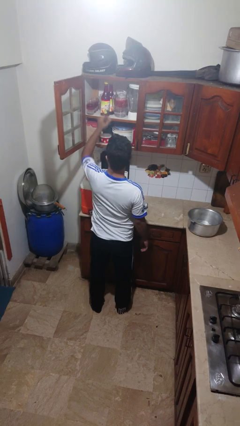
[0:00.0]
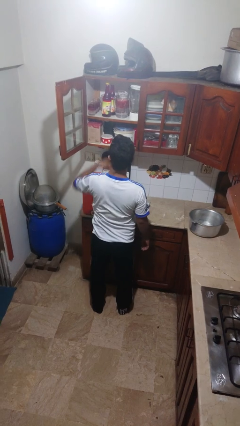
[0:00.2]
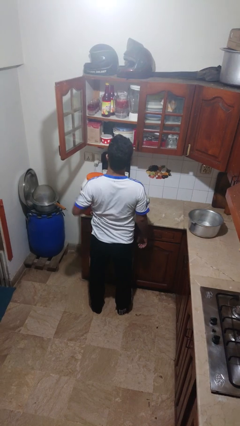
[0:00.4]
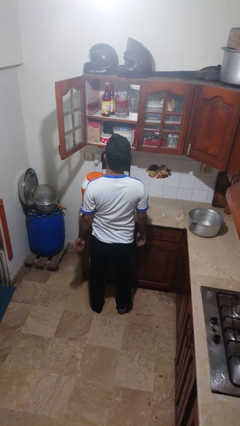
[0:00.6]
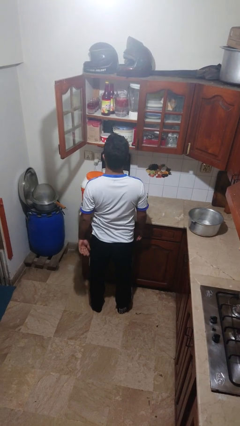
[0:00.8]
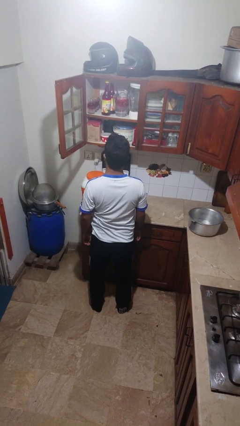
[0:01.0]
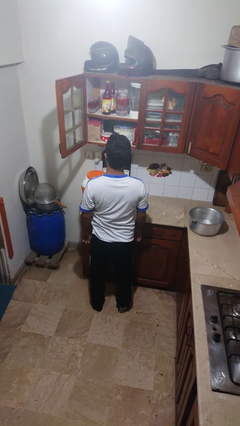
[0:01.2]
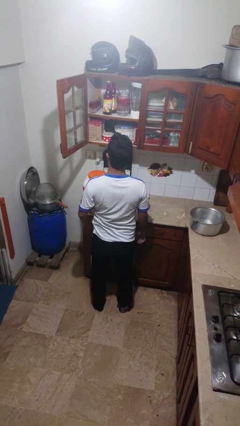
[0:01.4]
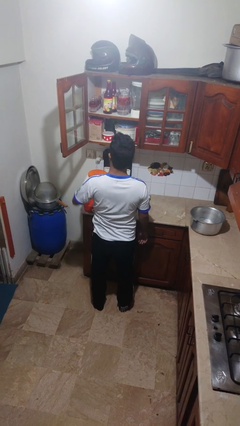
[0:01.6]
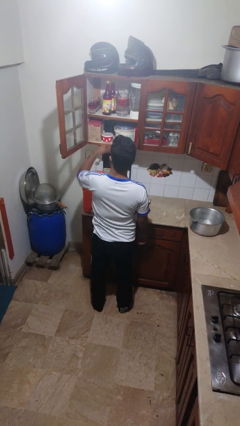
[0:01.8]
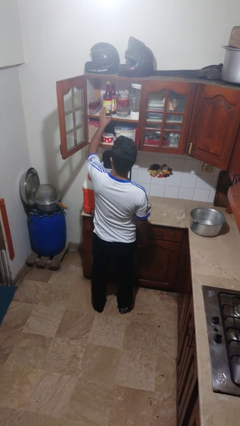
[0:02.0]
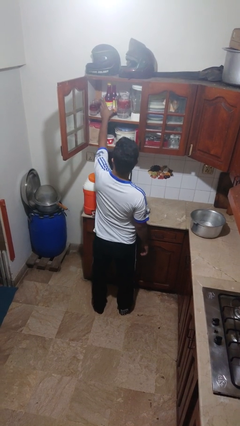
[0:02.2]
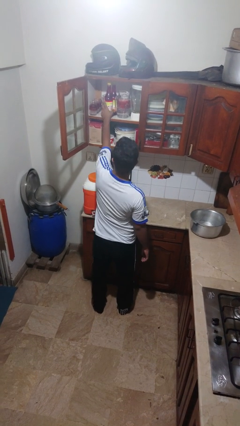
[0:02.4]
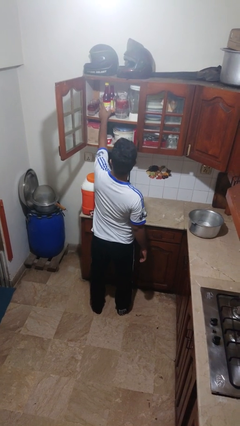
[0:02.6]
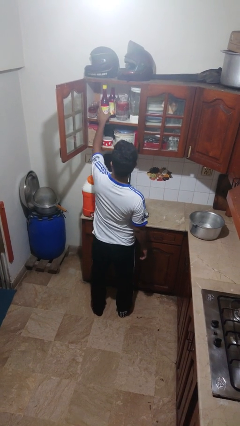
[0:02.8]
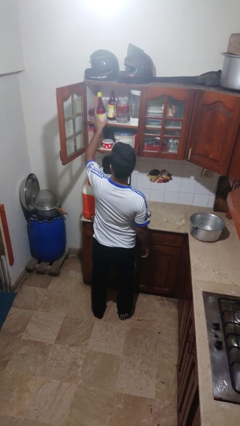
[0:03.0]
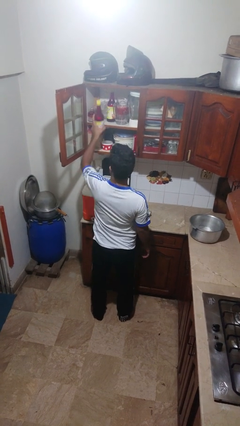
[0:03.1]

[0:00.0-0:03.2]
person picks up object from cabinet

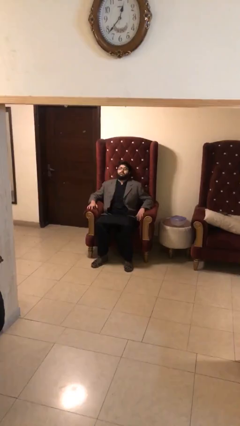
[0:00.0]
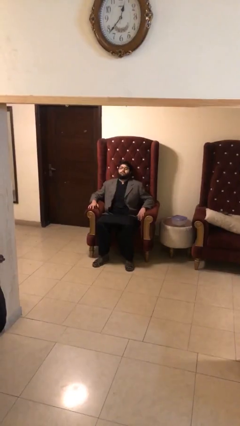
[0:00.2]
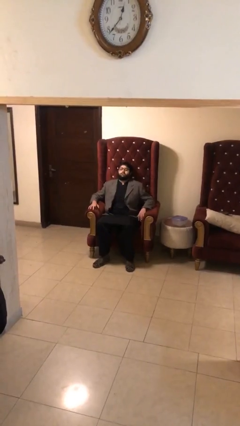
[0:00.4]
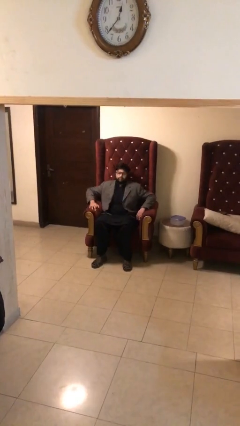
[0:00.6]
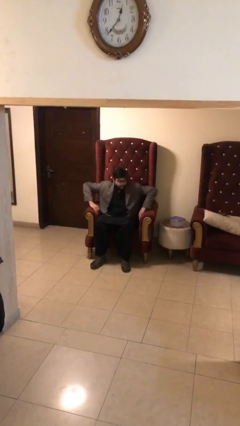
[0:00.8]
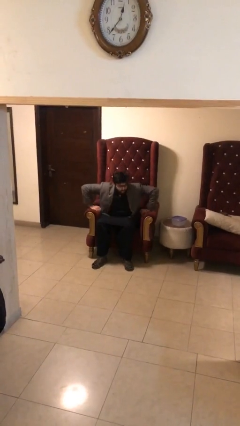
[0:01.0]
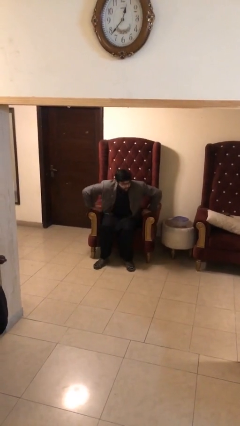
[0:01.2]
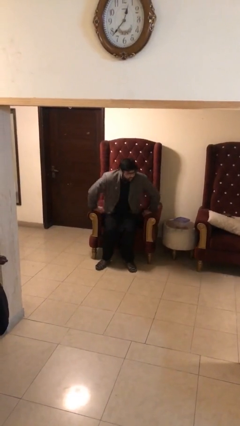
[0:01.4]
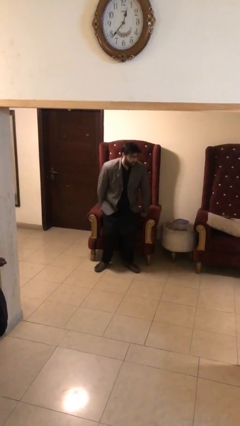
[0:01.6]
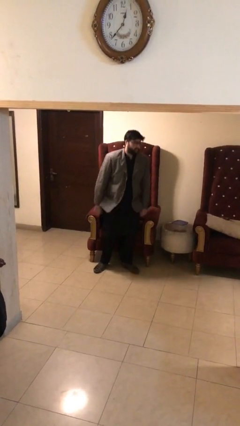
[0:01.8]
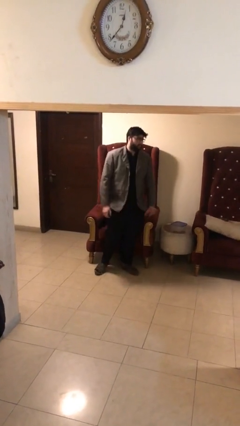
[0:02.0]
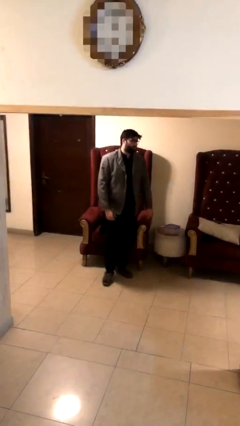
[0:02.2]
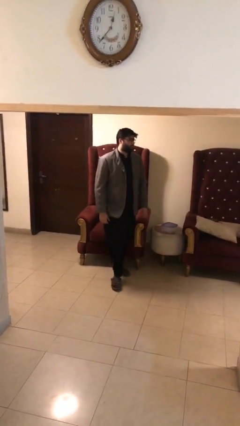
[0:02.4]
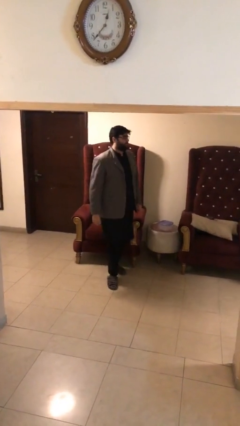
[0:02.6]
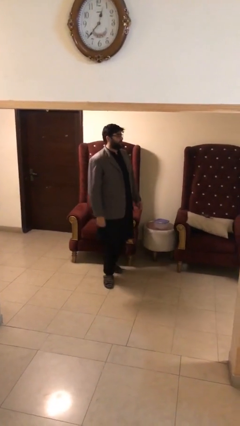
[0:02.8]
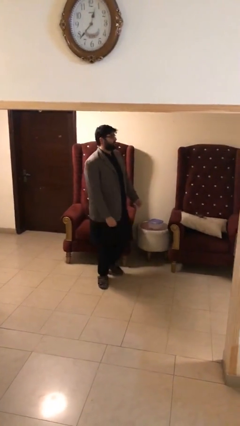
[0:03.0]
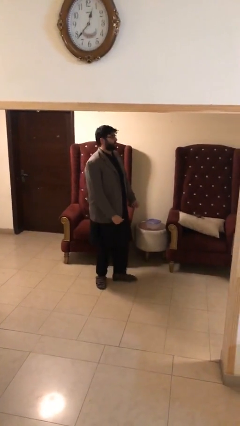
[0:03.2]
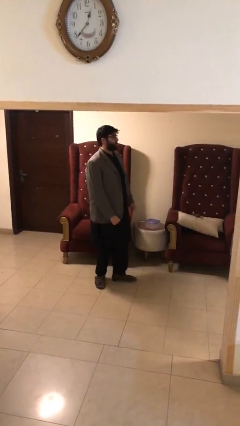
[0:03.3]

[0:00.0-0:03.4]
person stands up

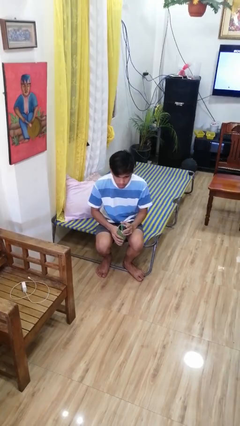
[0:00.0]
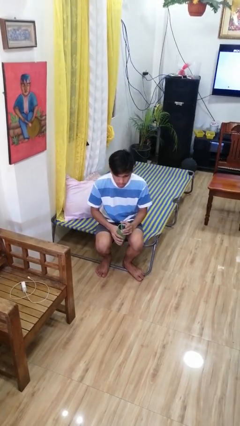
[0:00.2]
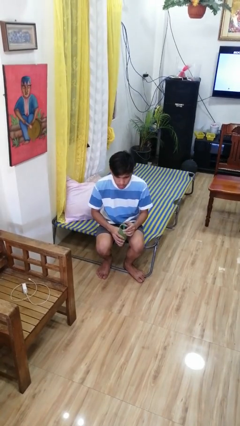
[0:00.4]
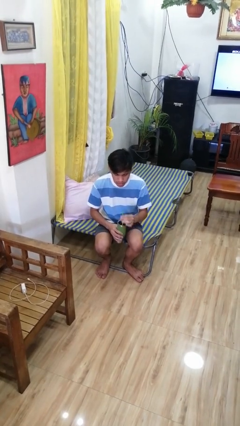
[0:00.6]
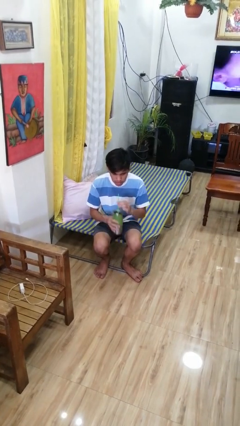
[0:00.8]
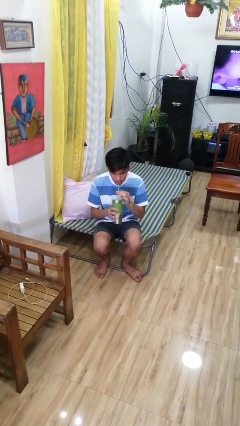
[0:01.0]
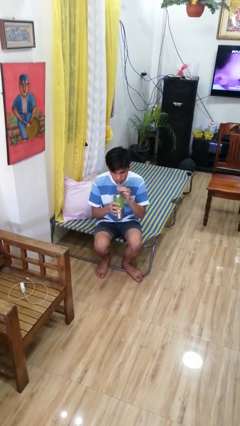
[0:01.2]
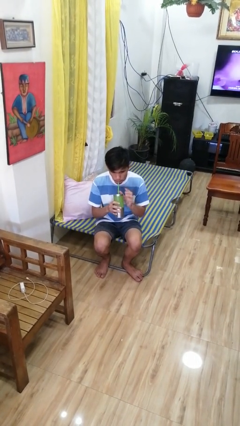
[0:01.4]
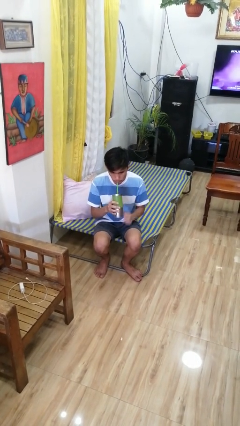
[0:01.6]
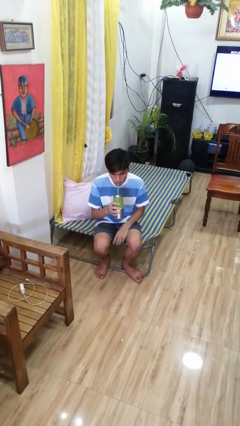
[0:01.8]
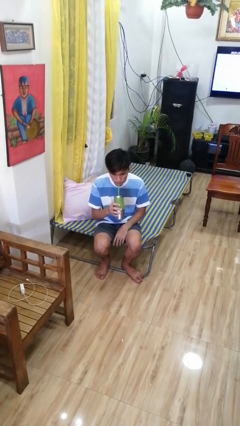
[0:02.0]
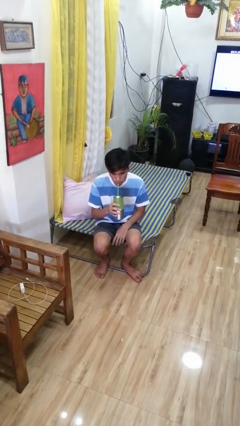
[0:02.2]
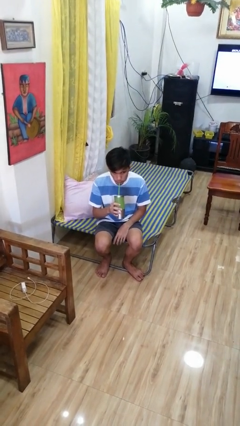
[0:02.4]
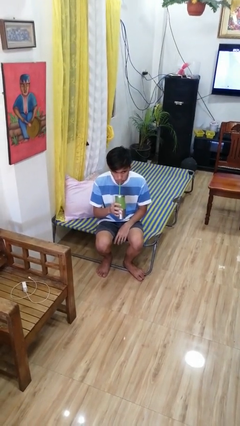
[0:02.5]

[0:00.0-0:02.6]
person drinks from straw

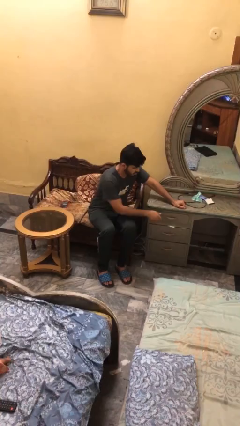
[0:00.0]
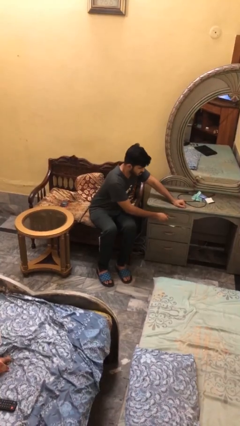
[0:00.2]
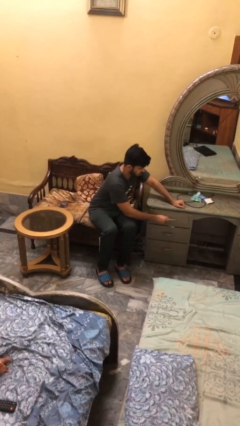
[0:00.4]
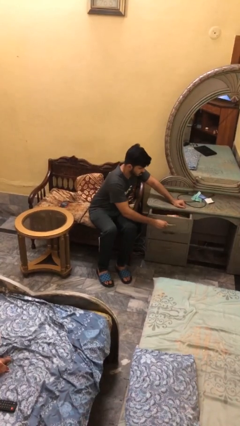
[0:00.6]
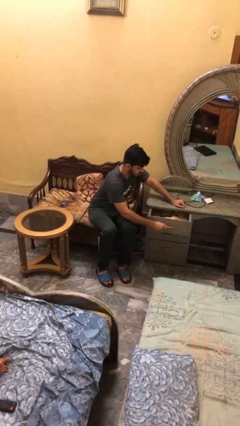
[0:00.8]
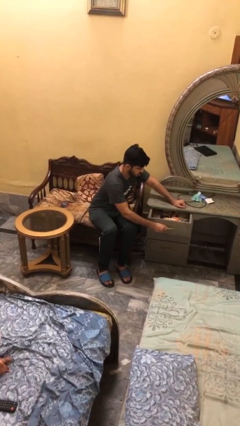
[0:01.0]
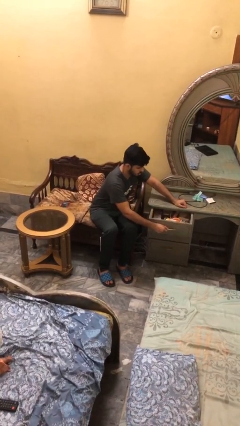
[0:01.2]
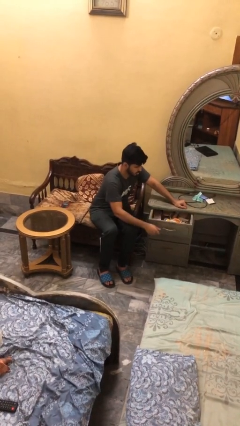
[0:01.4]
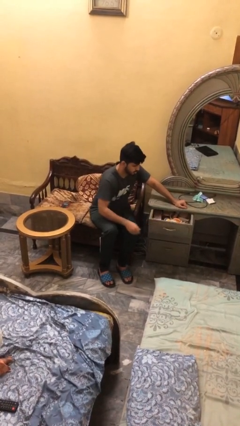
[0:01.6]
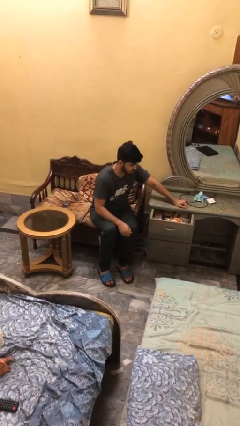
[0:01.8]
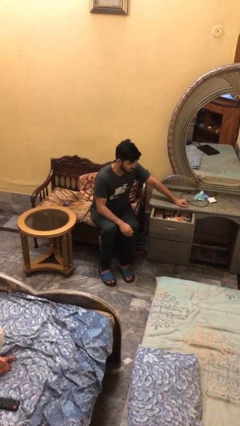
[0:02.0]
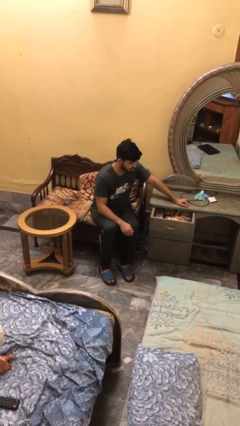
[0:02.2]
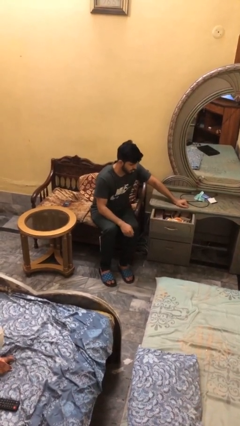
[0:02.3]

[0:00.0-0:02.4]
person opens dresser drawer

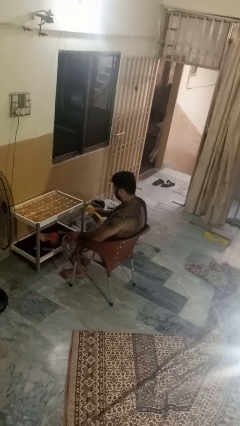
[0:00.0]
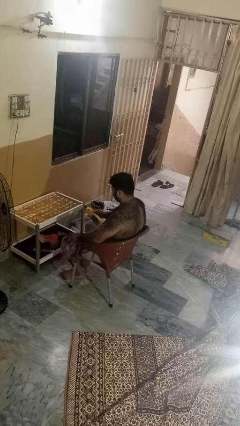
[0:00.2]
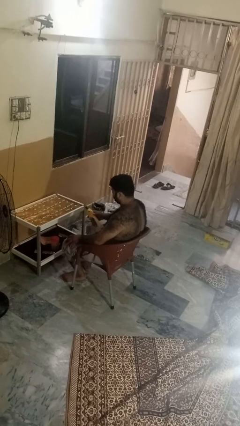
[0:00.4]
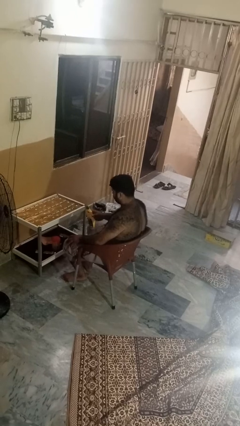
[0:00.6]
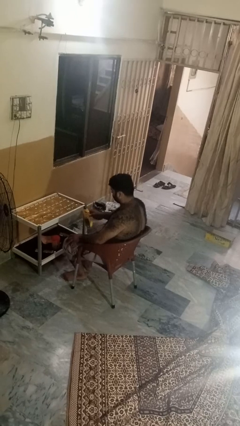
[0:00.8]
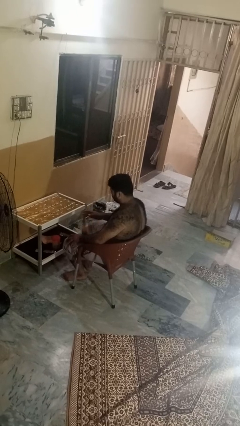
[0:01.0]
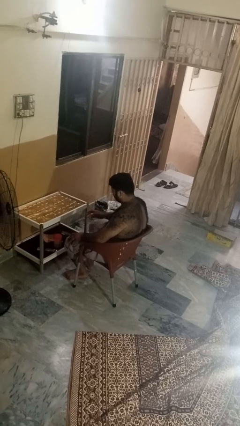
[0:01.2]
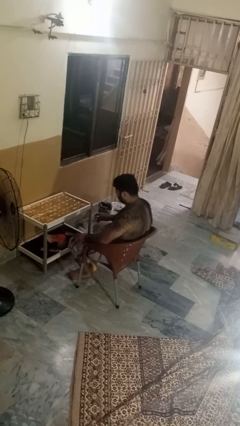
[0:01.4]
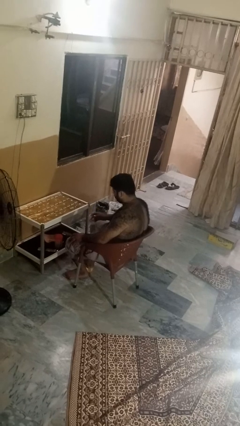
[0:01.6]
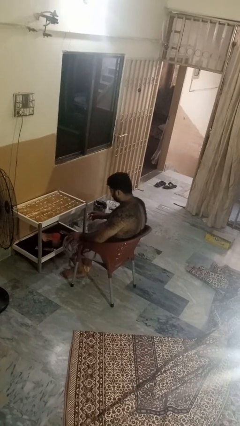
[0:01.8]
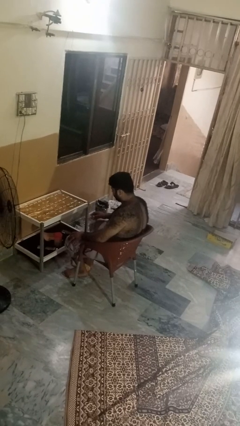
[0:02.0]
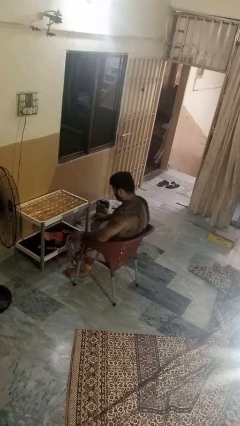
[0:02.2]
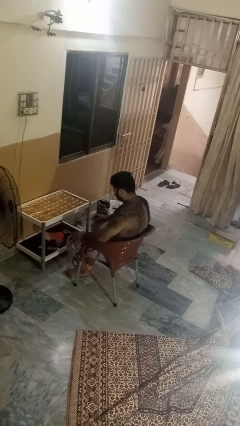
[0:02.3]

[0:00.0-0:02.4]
person throws object to ground

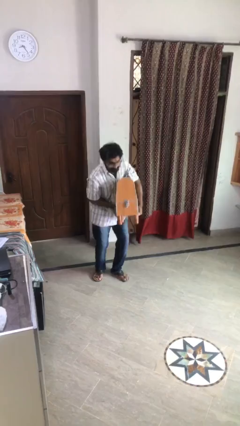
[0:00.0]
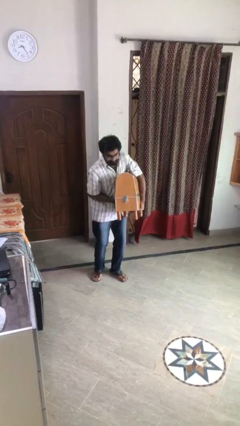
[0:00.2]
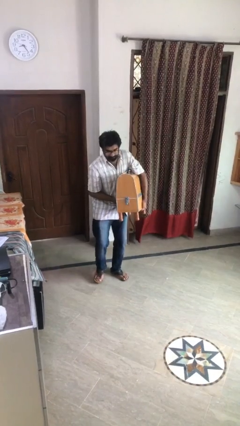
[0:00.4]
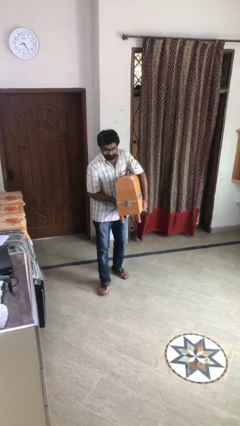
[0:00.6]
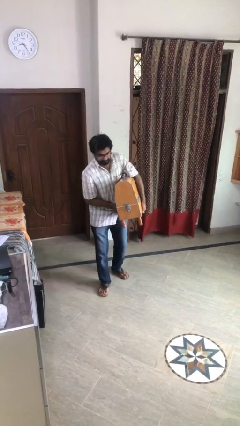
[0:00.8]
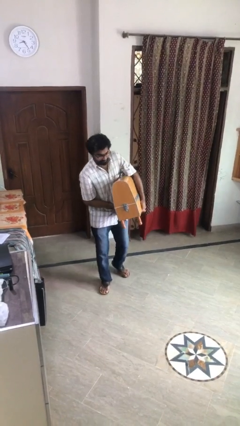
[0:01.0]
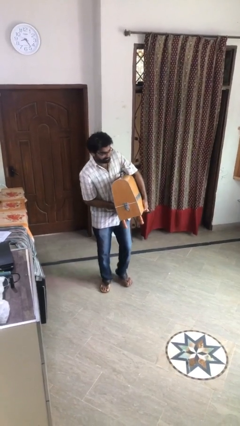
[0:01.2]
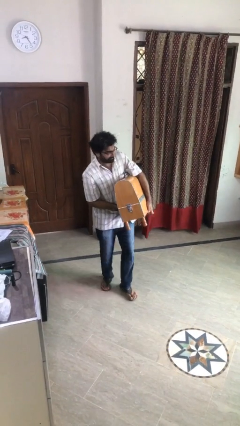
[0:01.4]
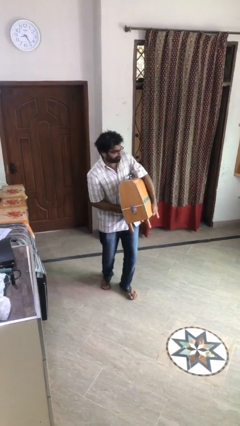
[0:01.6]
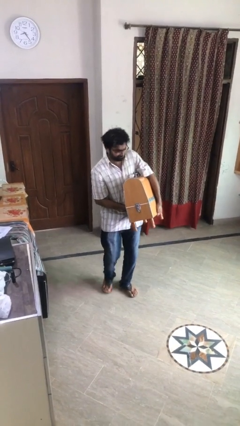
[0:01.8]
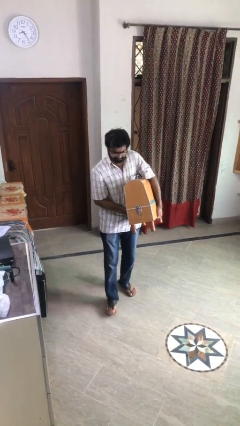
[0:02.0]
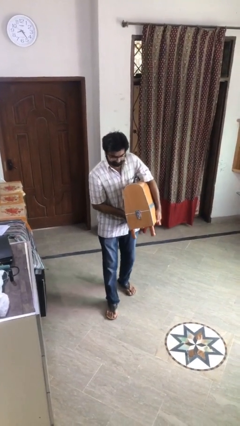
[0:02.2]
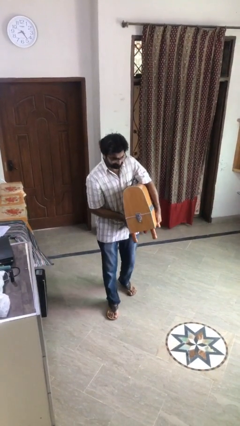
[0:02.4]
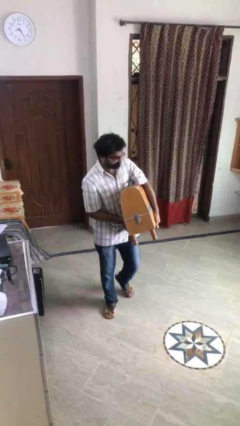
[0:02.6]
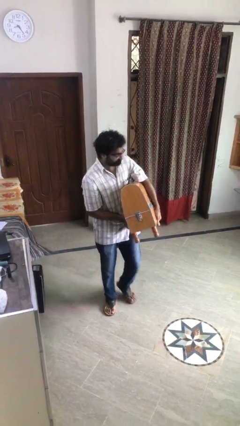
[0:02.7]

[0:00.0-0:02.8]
person carries heavy object

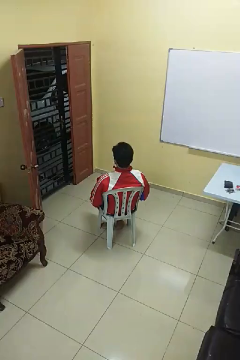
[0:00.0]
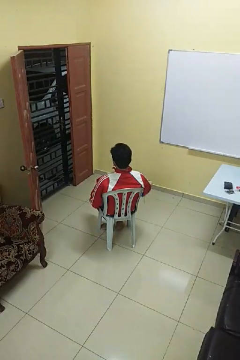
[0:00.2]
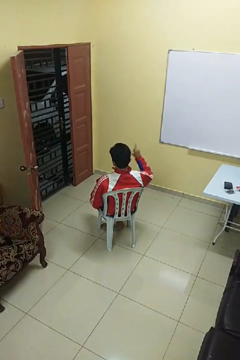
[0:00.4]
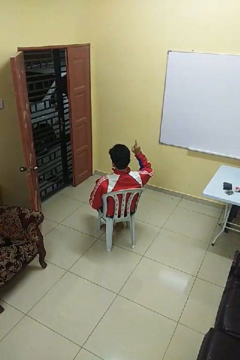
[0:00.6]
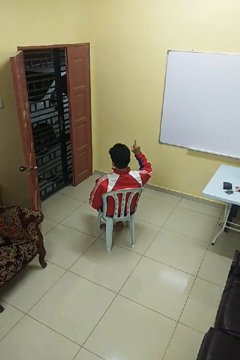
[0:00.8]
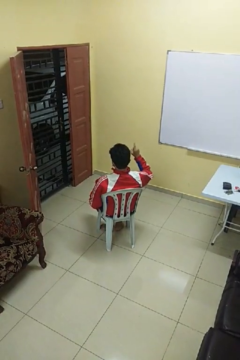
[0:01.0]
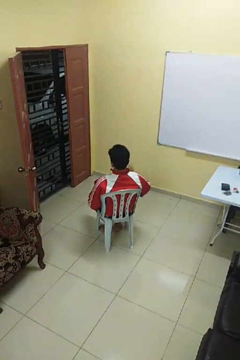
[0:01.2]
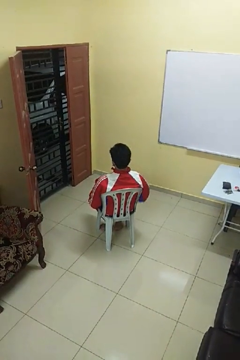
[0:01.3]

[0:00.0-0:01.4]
person gestures number one
